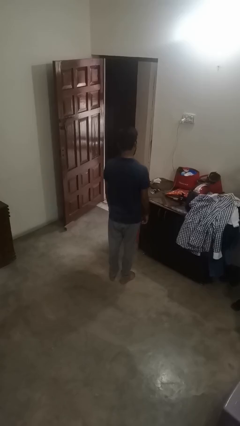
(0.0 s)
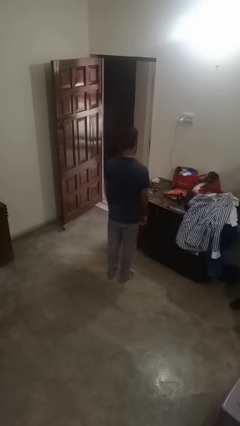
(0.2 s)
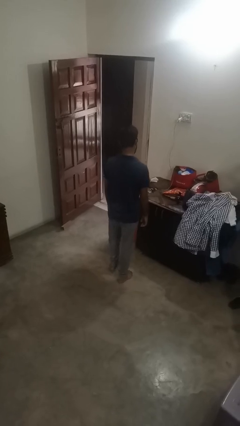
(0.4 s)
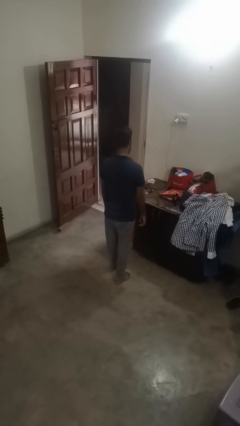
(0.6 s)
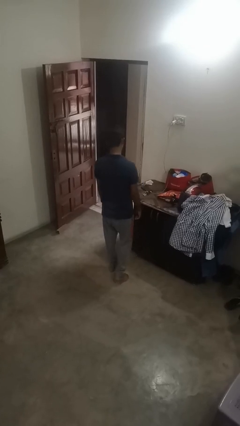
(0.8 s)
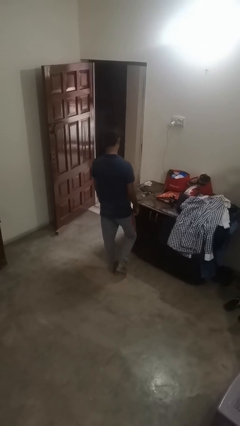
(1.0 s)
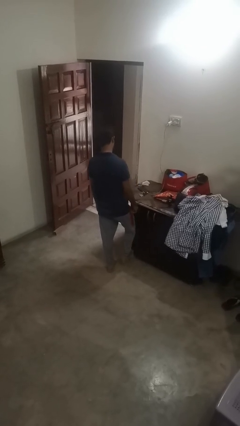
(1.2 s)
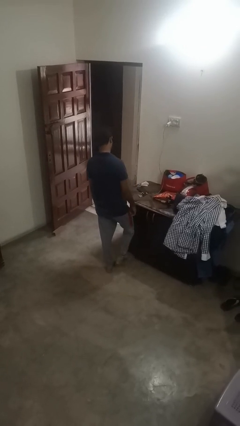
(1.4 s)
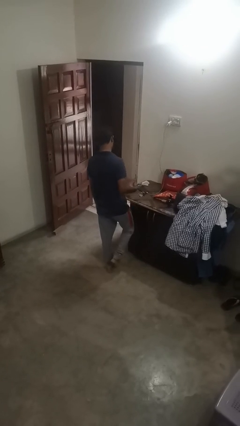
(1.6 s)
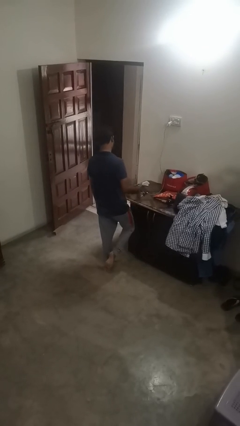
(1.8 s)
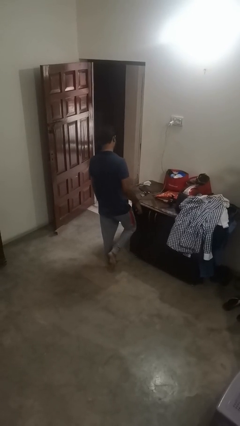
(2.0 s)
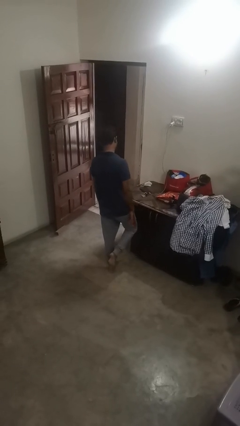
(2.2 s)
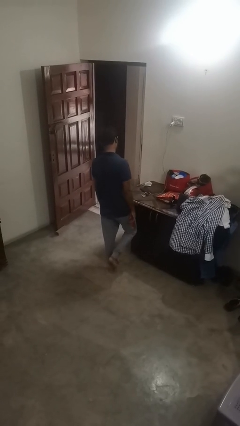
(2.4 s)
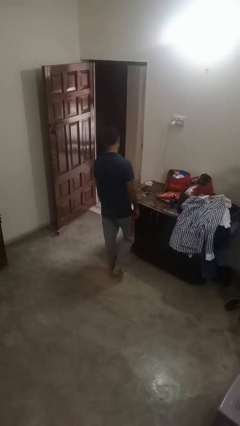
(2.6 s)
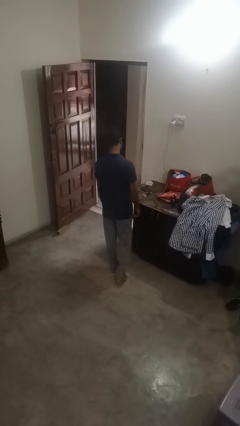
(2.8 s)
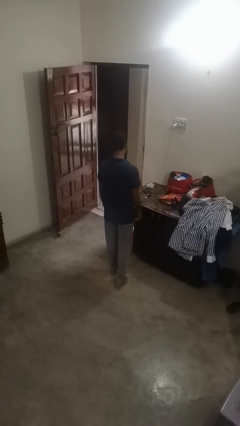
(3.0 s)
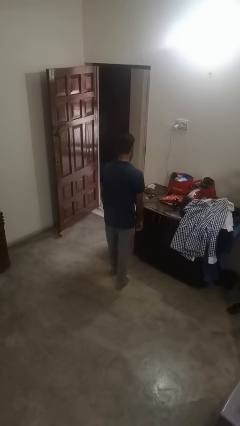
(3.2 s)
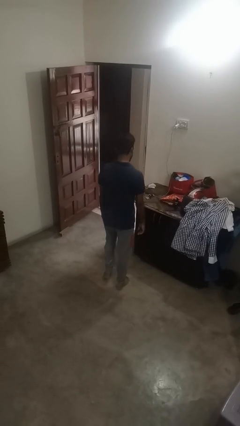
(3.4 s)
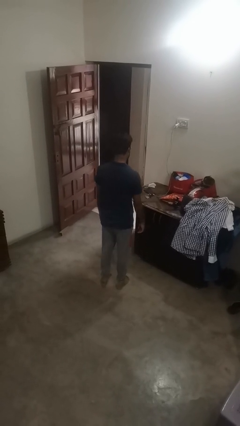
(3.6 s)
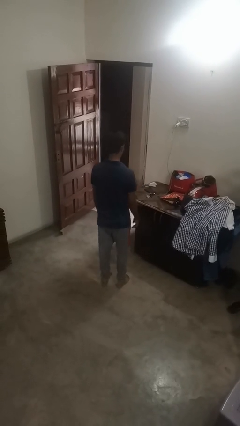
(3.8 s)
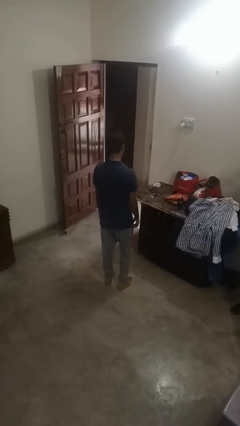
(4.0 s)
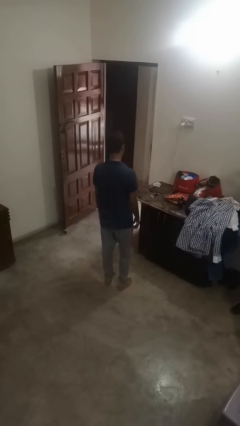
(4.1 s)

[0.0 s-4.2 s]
person stubs toe

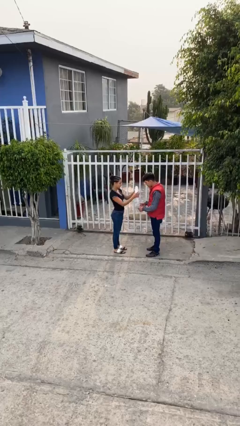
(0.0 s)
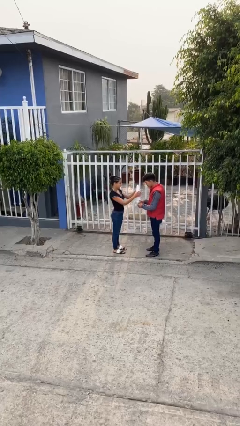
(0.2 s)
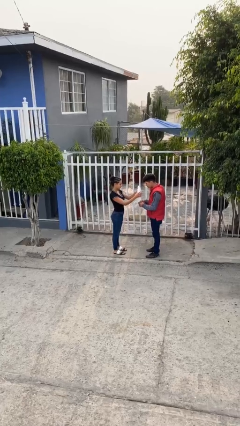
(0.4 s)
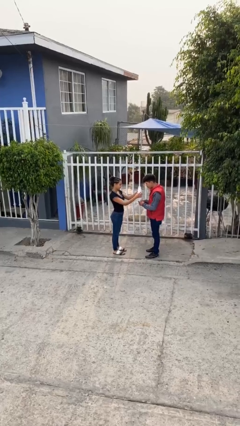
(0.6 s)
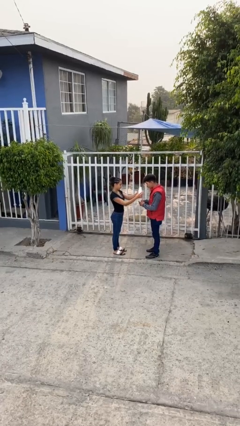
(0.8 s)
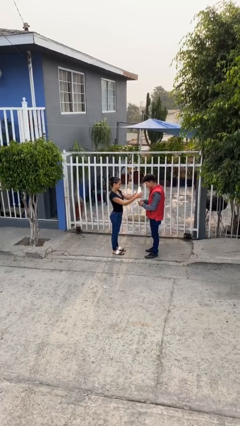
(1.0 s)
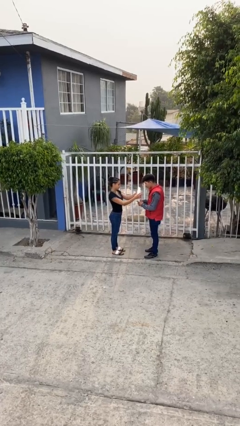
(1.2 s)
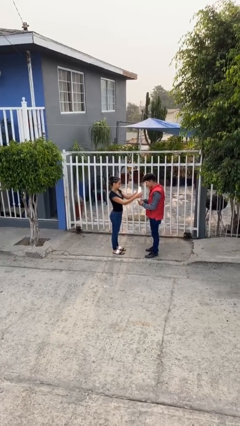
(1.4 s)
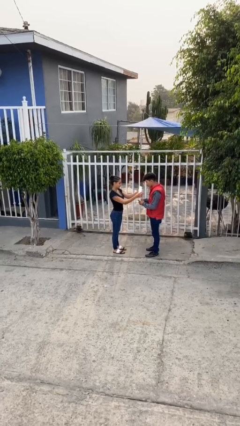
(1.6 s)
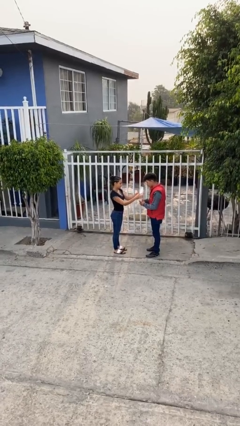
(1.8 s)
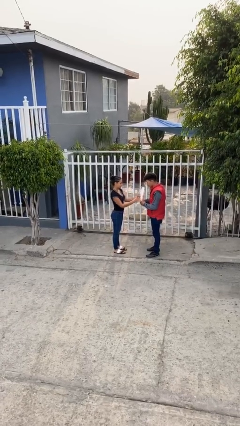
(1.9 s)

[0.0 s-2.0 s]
person transfers object to person

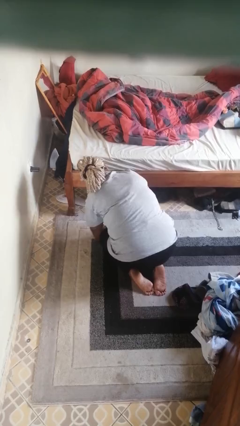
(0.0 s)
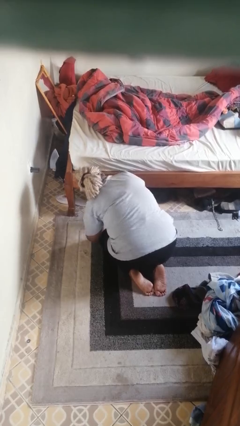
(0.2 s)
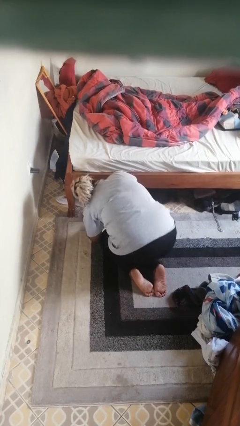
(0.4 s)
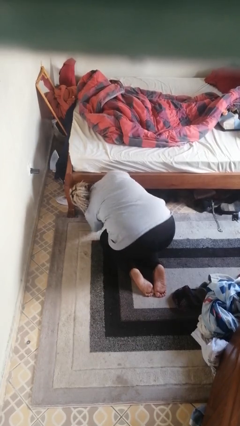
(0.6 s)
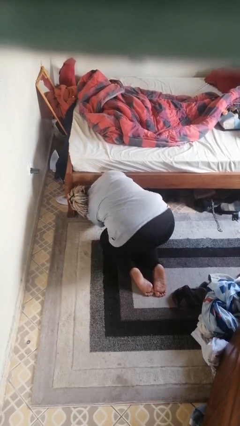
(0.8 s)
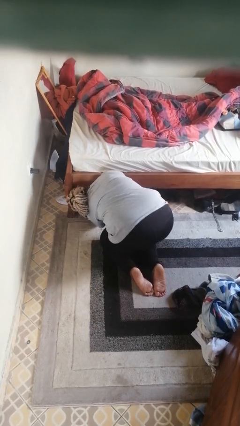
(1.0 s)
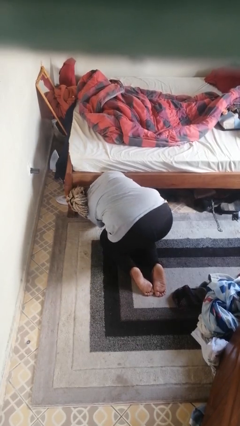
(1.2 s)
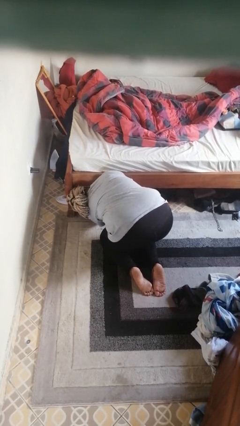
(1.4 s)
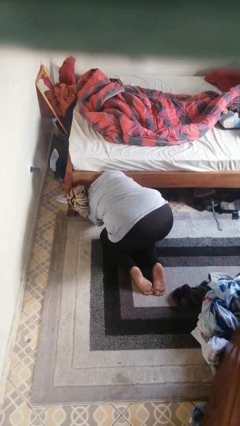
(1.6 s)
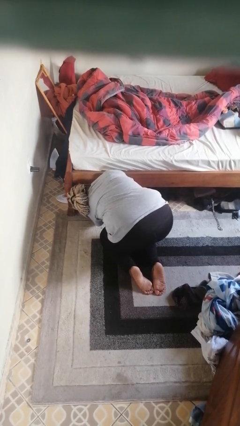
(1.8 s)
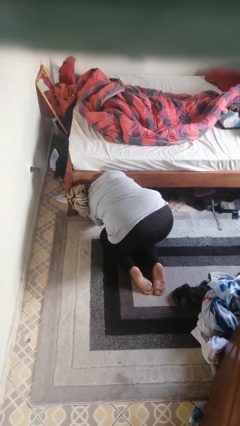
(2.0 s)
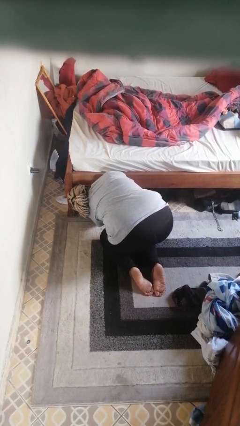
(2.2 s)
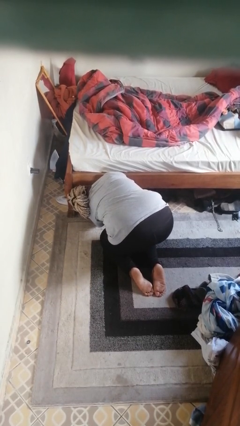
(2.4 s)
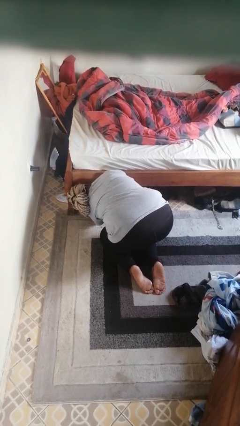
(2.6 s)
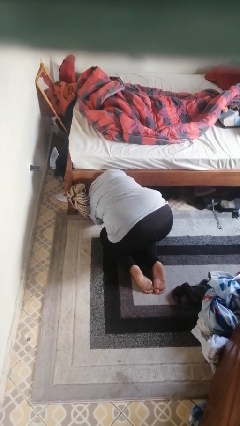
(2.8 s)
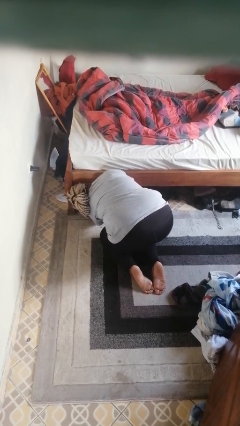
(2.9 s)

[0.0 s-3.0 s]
person searches under bed

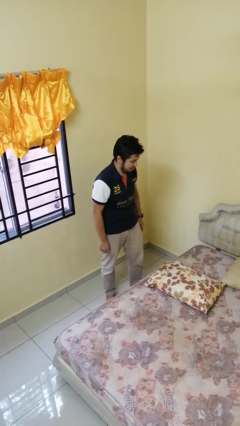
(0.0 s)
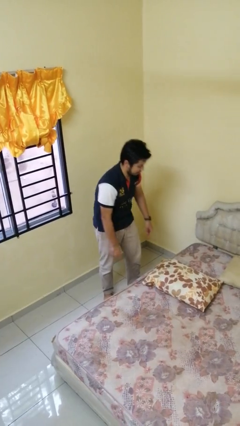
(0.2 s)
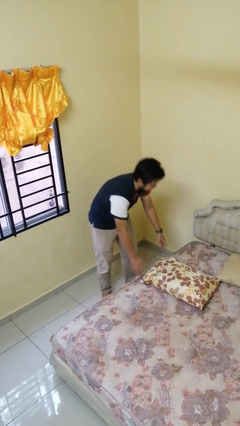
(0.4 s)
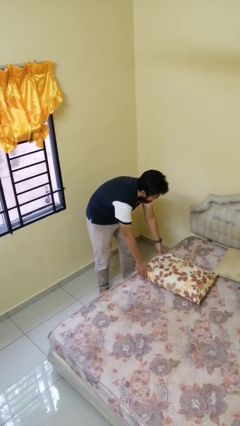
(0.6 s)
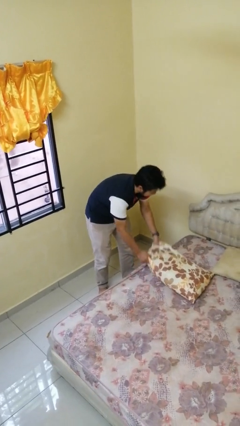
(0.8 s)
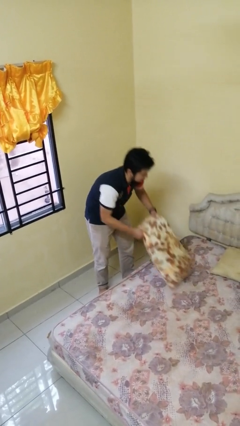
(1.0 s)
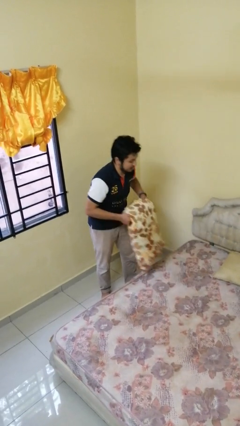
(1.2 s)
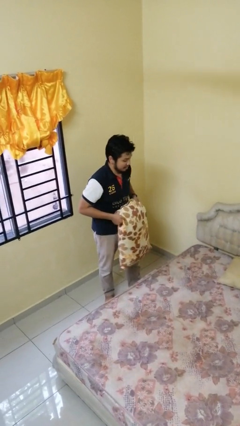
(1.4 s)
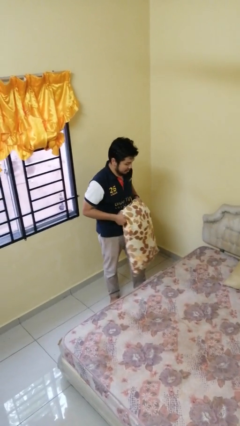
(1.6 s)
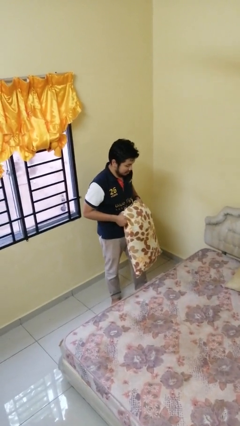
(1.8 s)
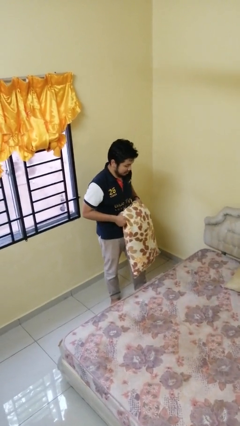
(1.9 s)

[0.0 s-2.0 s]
person picks up object from bed

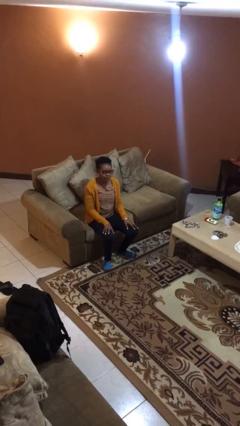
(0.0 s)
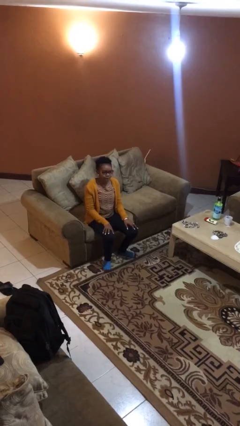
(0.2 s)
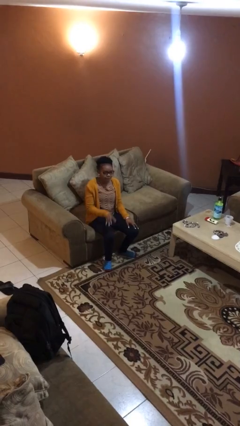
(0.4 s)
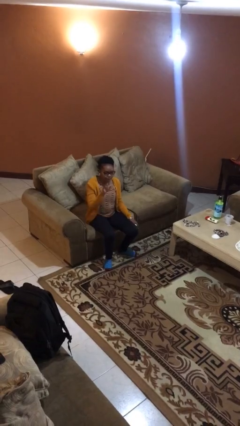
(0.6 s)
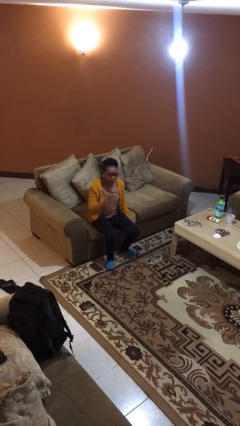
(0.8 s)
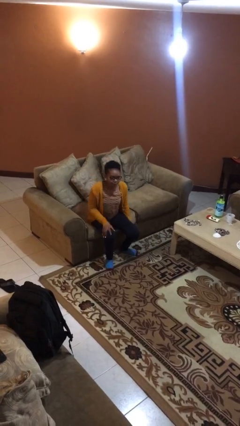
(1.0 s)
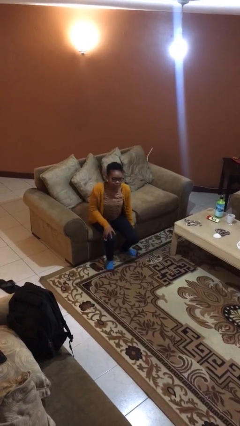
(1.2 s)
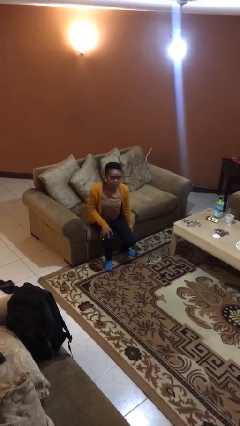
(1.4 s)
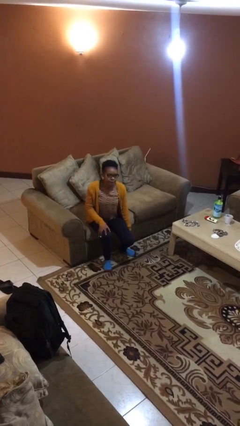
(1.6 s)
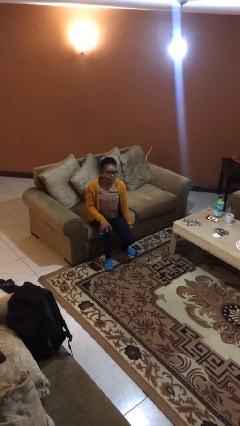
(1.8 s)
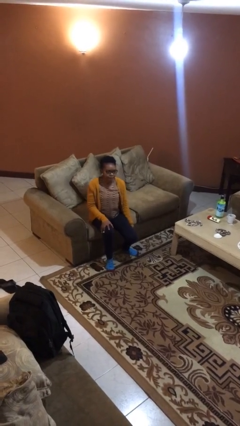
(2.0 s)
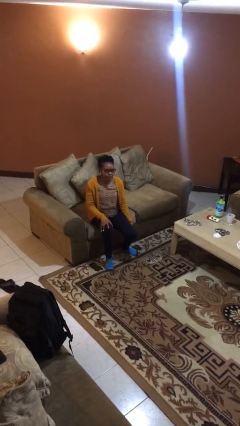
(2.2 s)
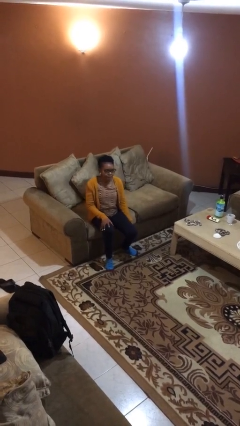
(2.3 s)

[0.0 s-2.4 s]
person slaps hands on thighs

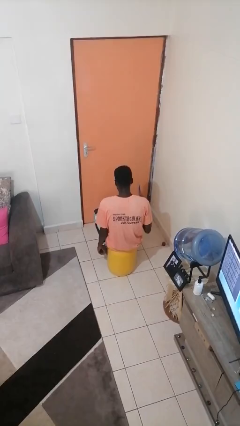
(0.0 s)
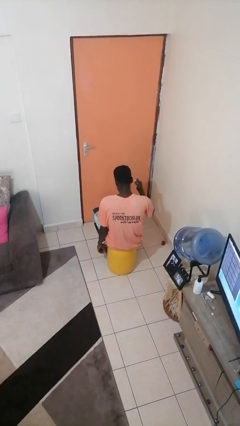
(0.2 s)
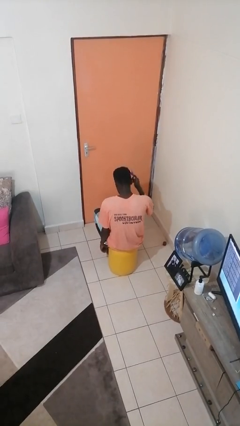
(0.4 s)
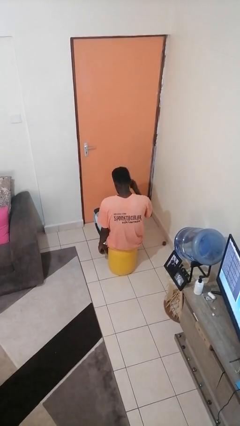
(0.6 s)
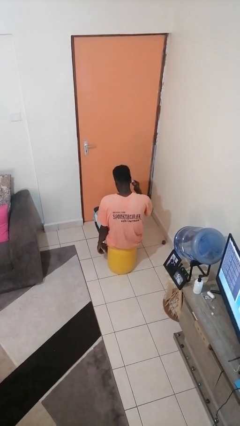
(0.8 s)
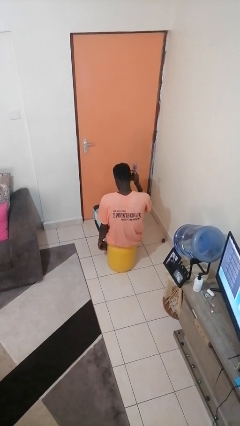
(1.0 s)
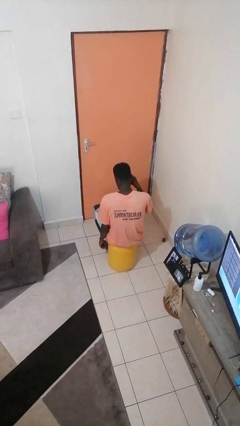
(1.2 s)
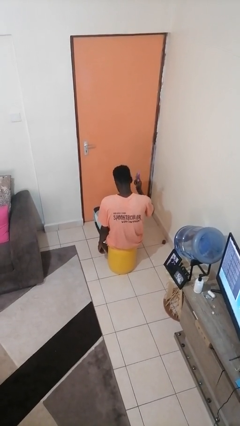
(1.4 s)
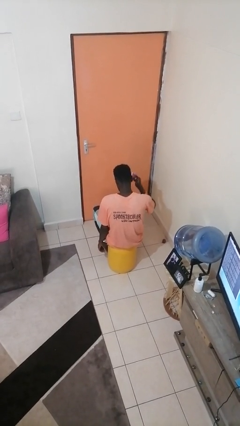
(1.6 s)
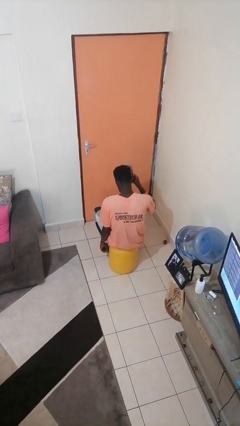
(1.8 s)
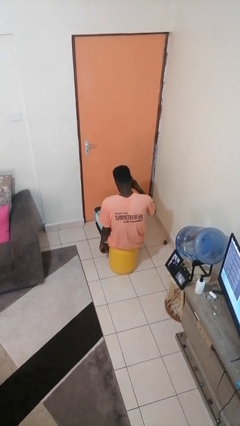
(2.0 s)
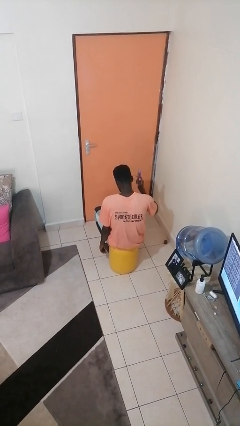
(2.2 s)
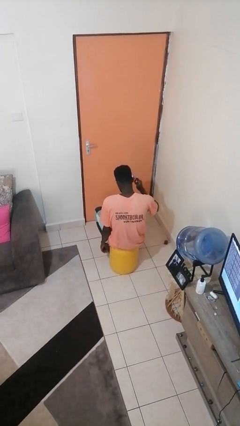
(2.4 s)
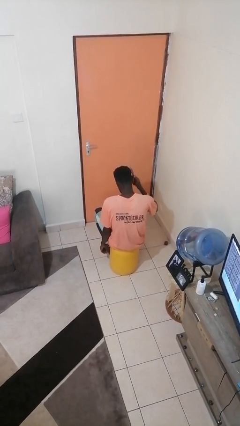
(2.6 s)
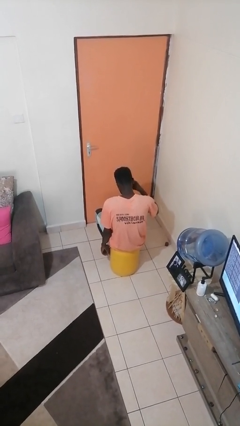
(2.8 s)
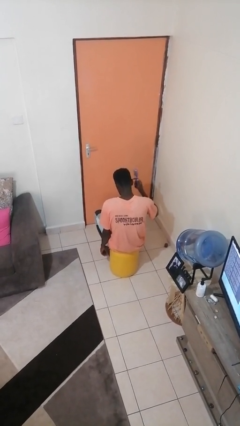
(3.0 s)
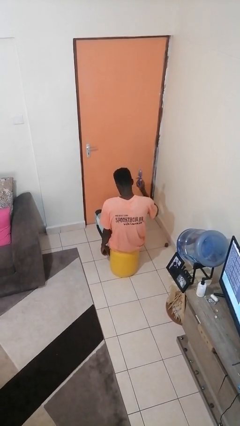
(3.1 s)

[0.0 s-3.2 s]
person brushes hair

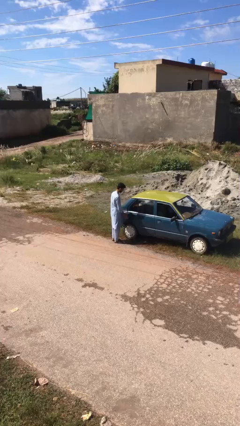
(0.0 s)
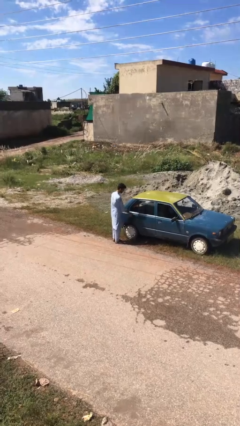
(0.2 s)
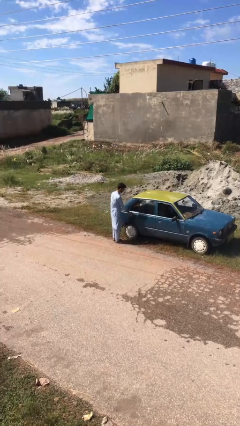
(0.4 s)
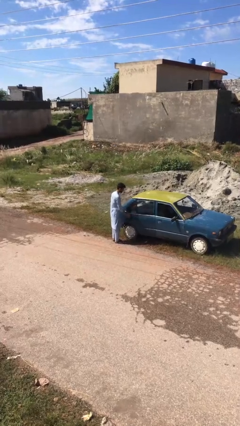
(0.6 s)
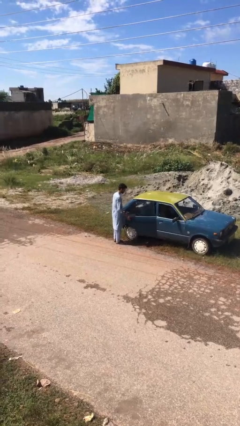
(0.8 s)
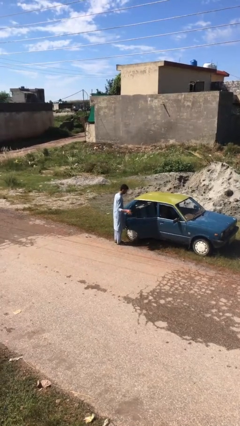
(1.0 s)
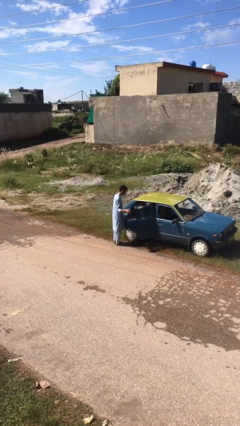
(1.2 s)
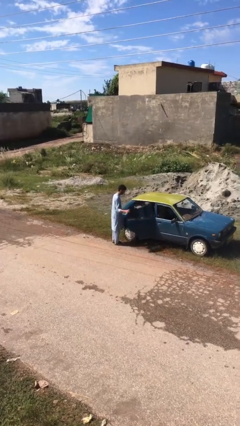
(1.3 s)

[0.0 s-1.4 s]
person opens car door
